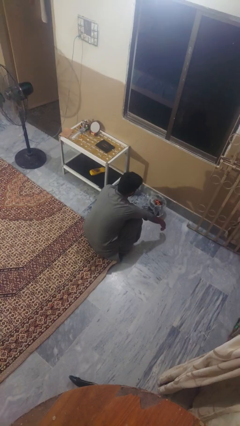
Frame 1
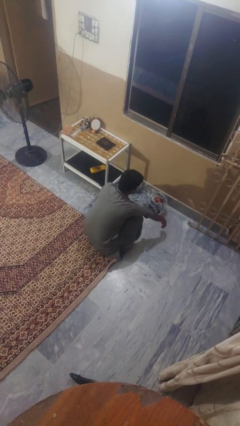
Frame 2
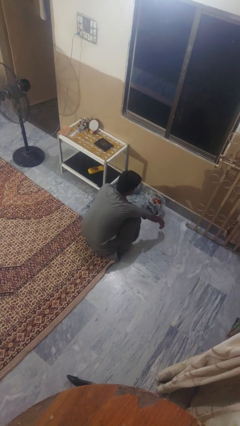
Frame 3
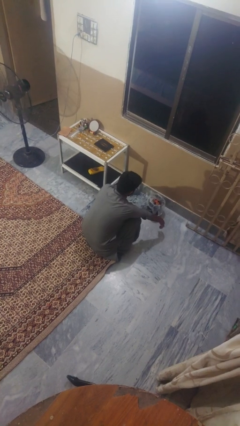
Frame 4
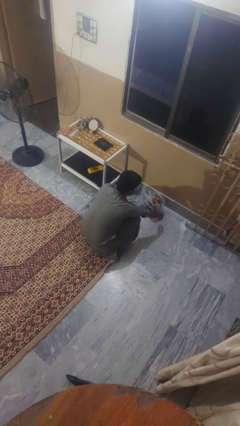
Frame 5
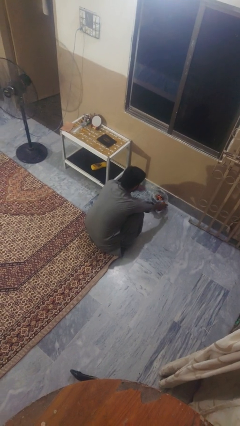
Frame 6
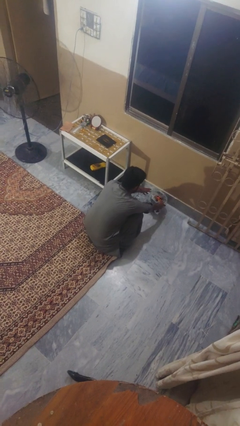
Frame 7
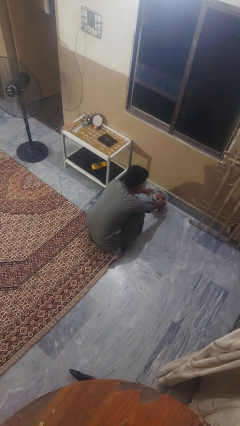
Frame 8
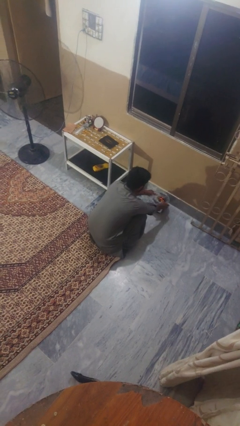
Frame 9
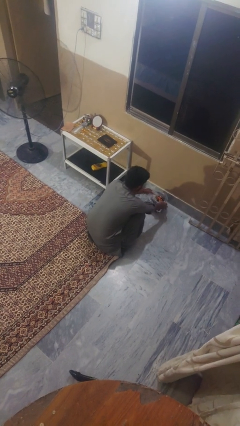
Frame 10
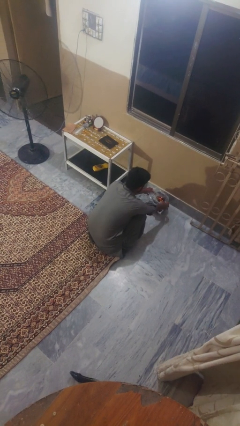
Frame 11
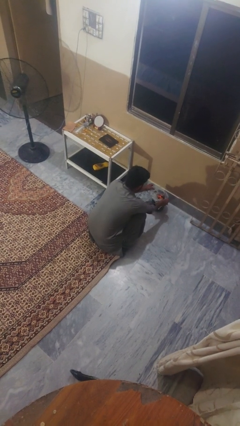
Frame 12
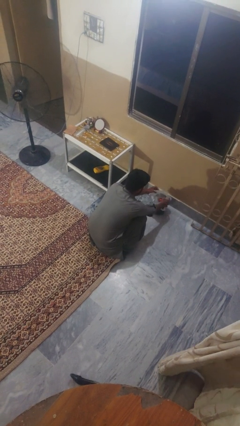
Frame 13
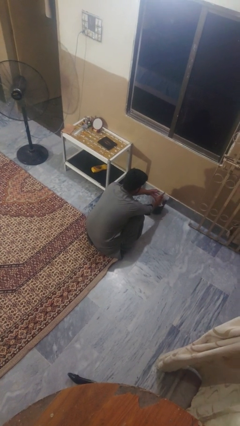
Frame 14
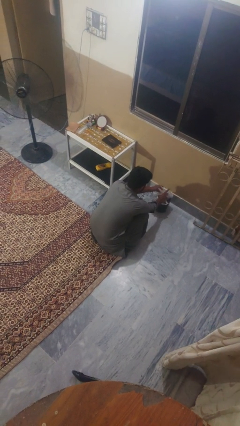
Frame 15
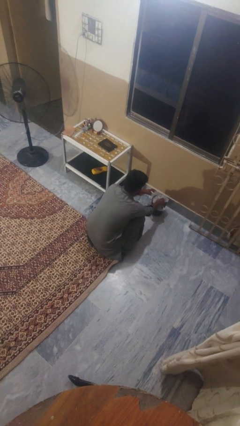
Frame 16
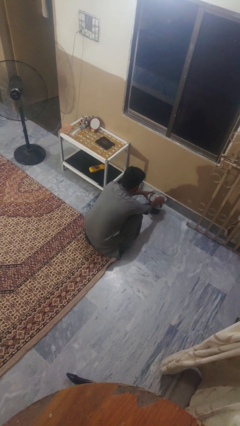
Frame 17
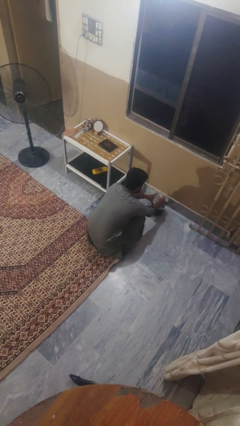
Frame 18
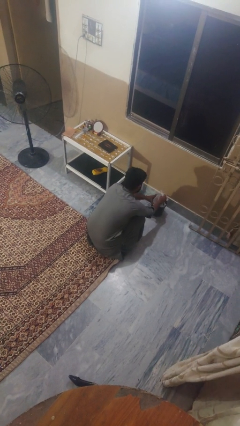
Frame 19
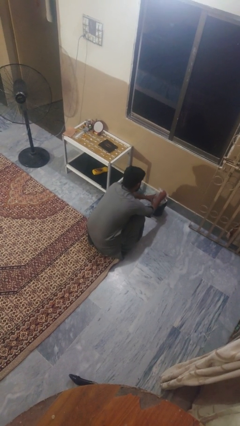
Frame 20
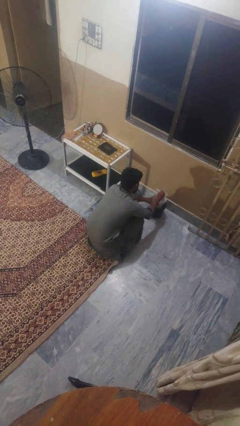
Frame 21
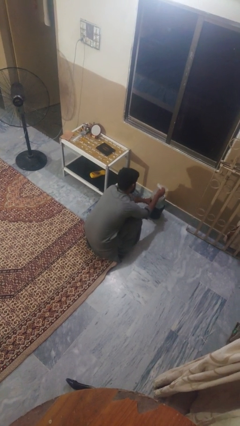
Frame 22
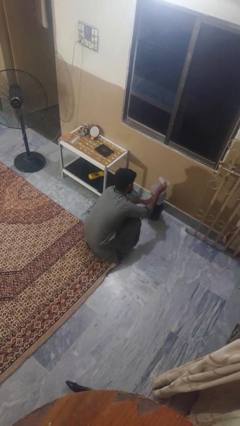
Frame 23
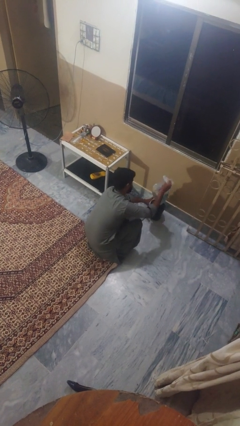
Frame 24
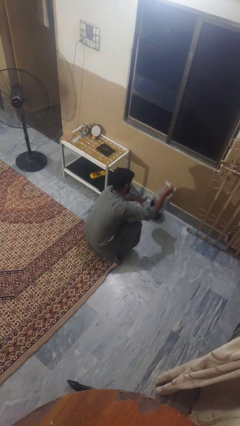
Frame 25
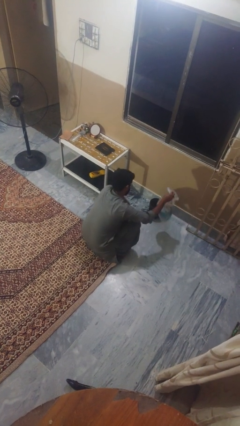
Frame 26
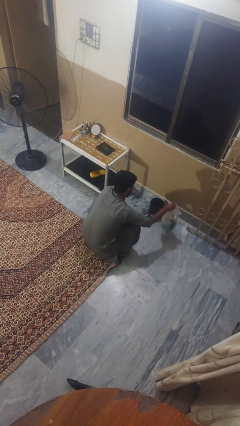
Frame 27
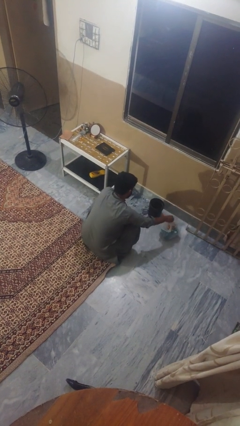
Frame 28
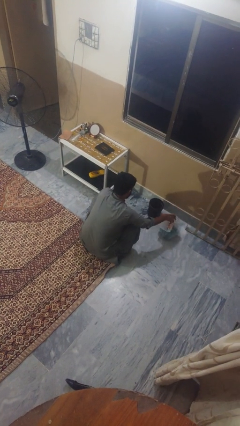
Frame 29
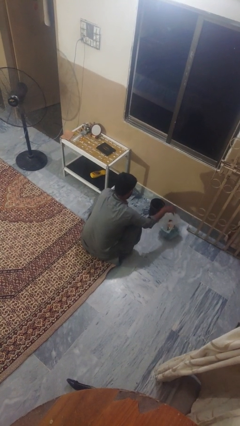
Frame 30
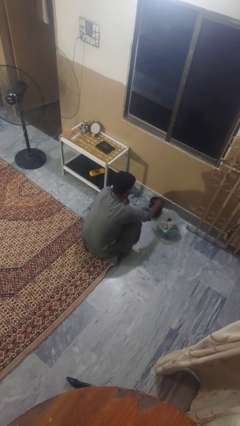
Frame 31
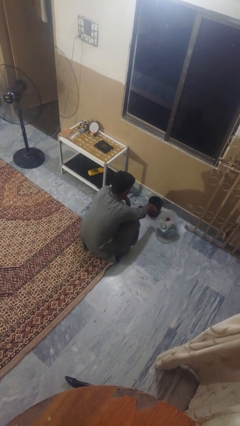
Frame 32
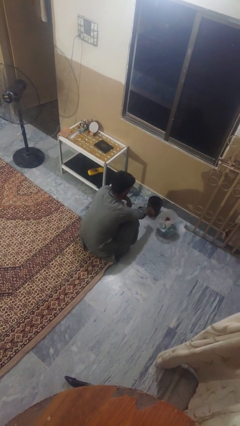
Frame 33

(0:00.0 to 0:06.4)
person removes trashbag from trashcan

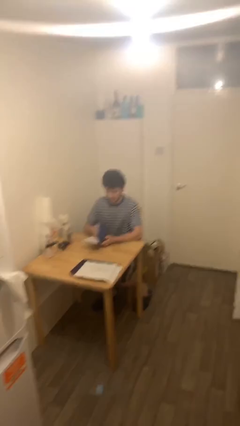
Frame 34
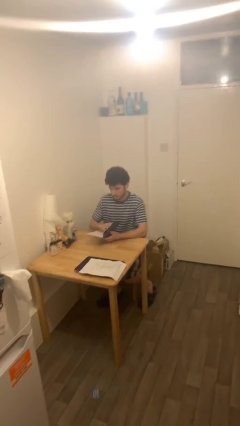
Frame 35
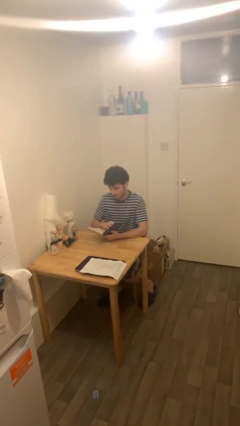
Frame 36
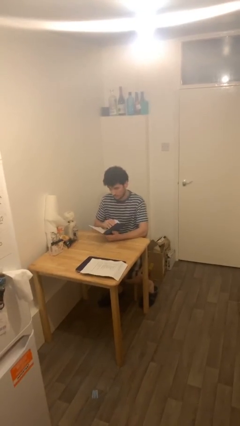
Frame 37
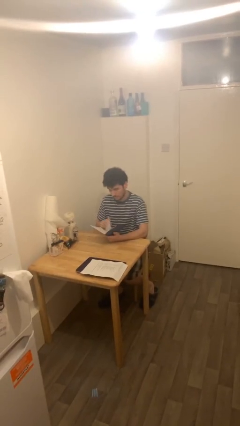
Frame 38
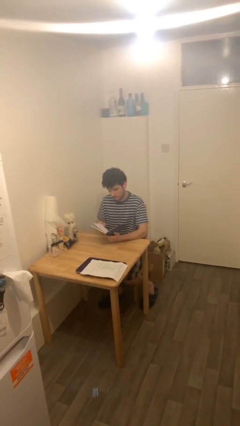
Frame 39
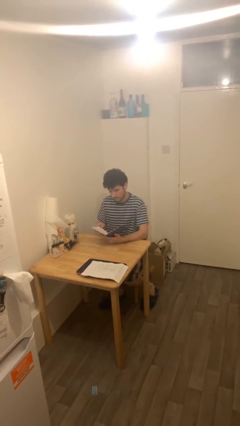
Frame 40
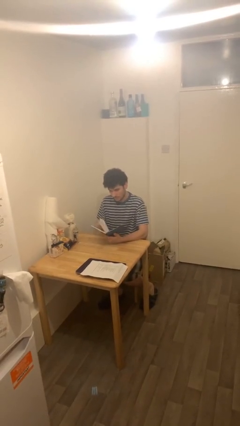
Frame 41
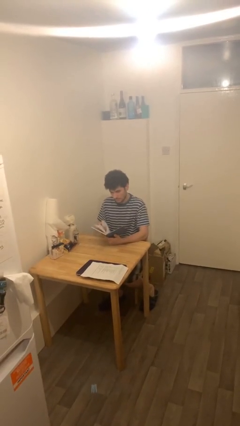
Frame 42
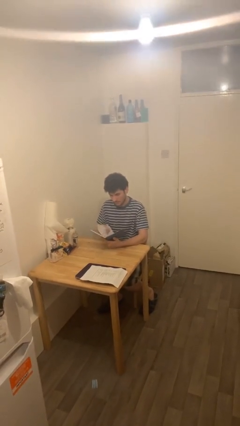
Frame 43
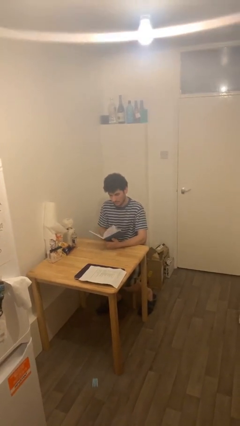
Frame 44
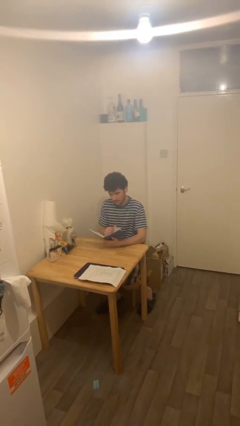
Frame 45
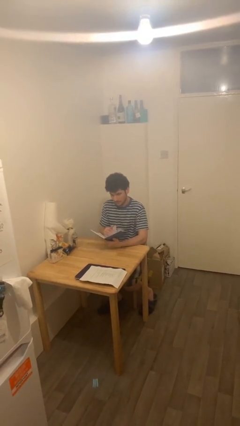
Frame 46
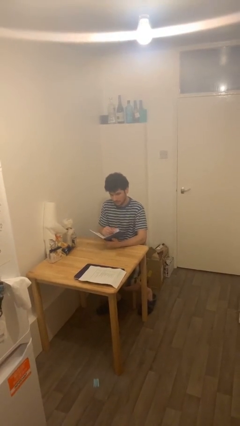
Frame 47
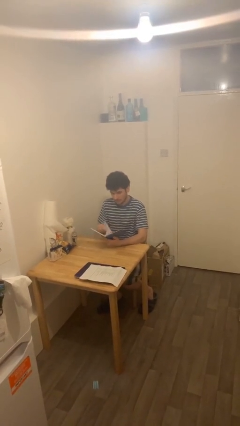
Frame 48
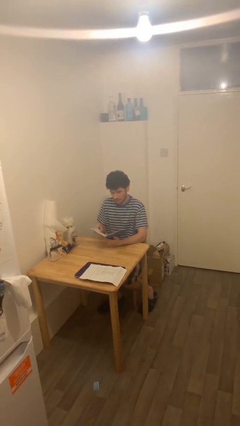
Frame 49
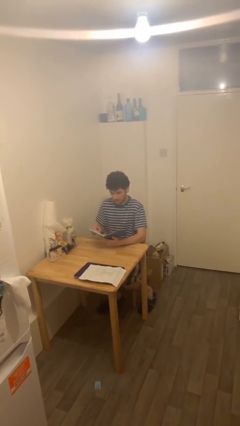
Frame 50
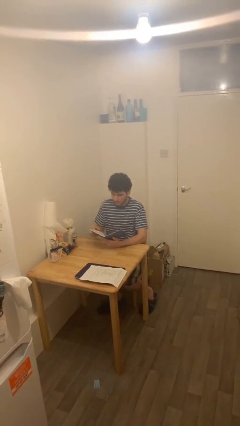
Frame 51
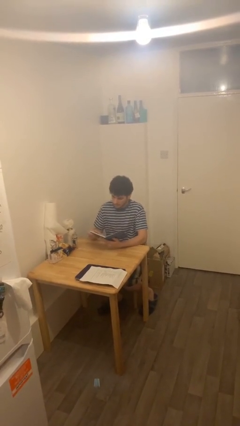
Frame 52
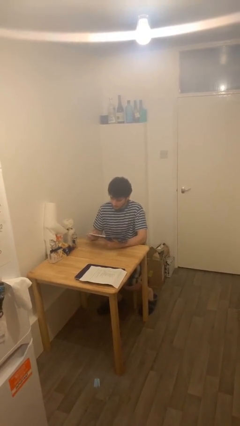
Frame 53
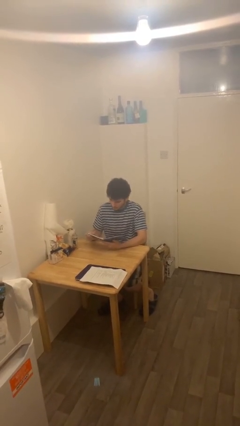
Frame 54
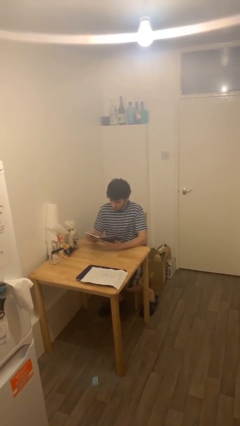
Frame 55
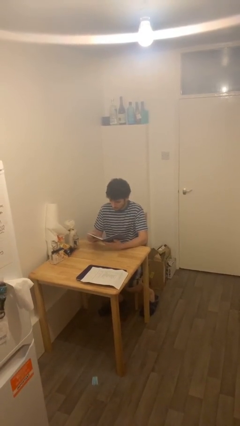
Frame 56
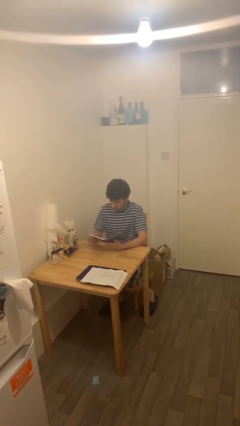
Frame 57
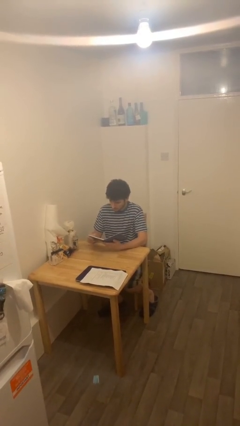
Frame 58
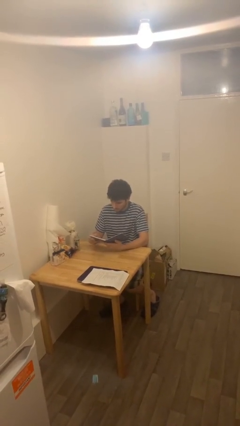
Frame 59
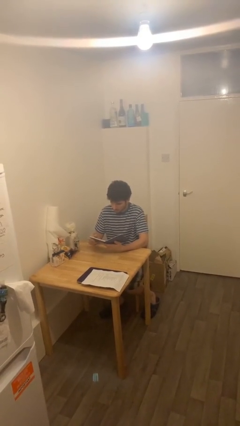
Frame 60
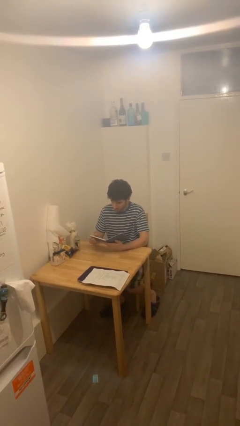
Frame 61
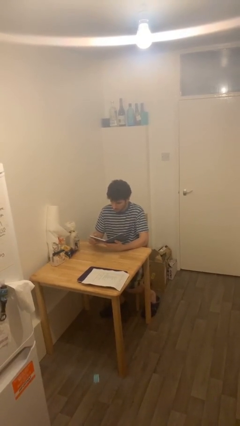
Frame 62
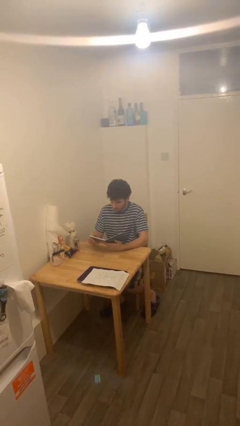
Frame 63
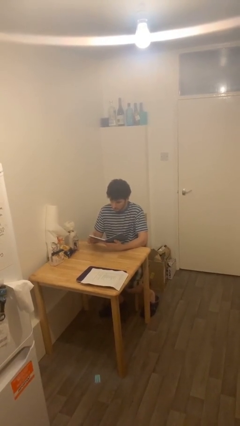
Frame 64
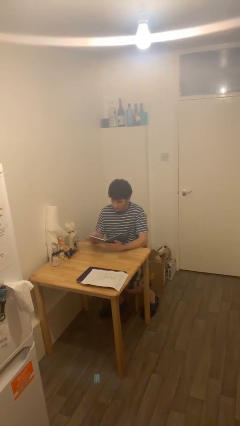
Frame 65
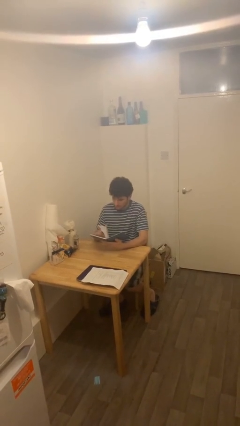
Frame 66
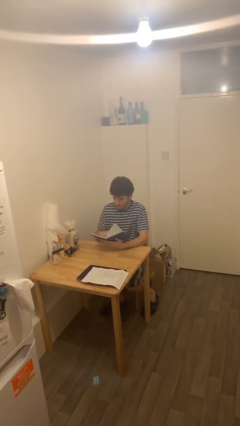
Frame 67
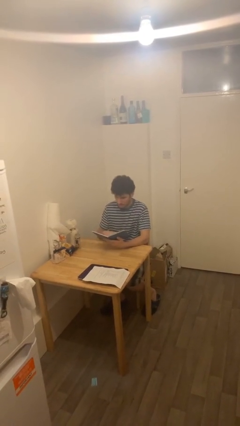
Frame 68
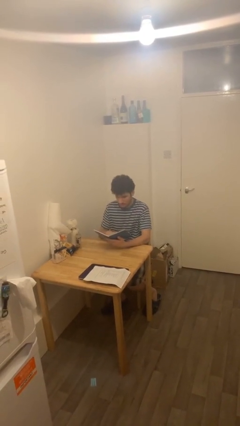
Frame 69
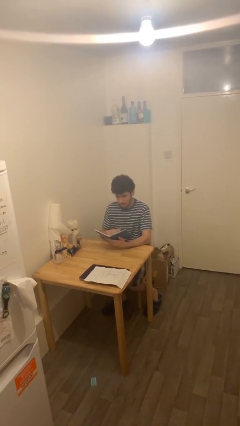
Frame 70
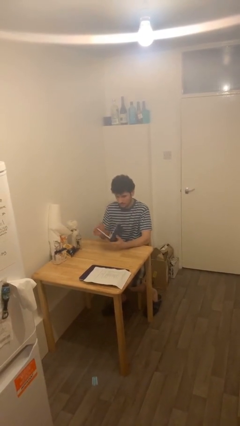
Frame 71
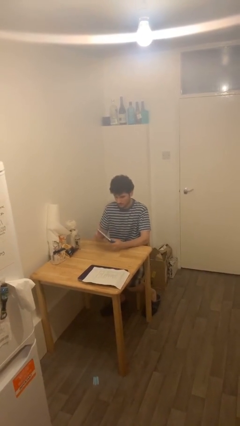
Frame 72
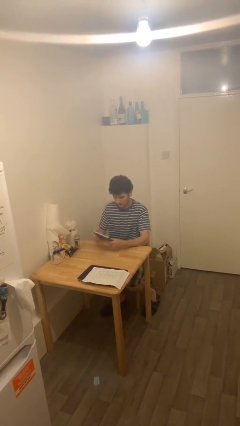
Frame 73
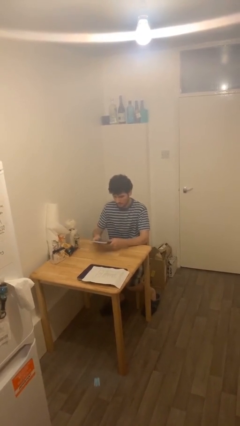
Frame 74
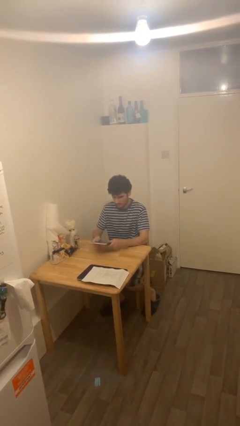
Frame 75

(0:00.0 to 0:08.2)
person reads document

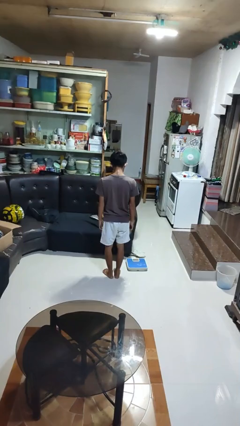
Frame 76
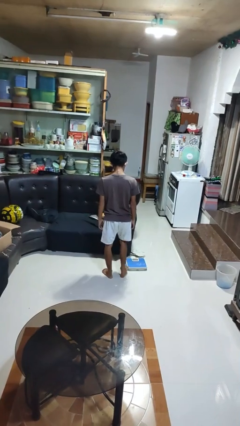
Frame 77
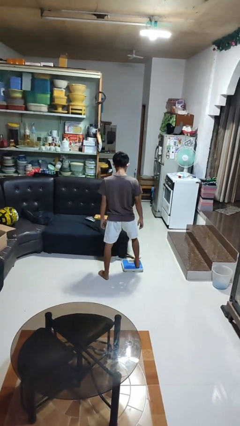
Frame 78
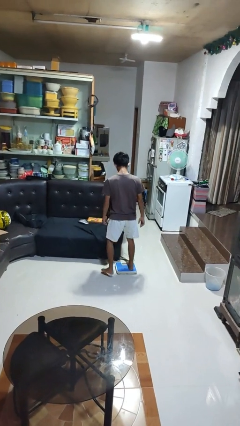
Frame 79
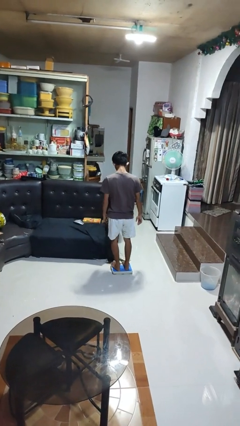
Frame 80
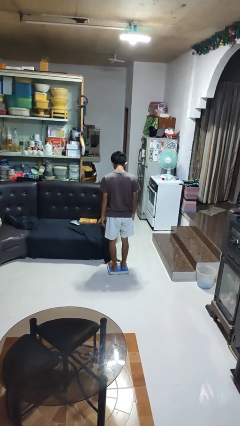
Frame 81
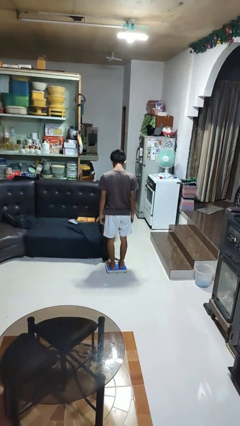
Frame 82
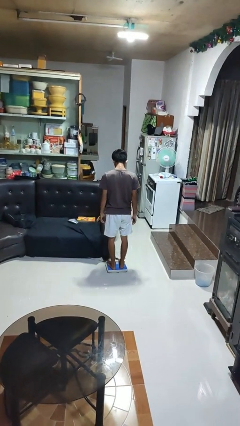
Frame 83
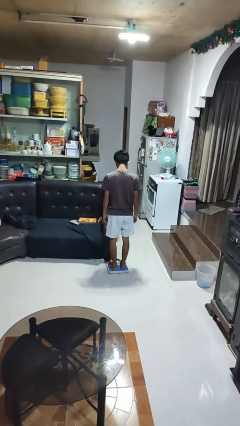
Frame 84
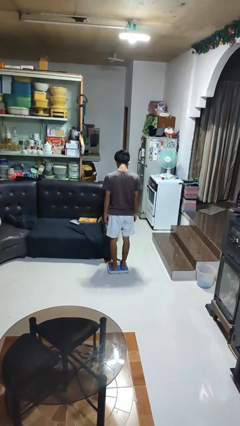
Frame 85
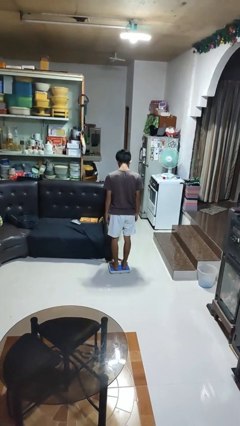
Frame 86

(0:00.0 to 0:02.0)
person uses bodyweight scale

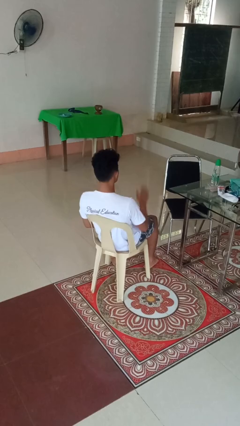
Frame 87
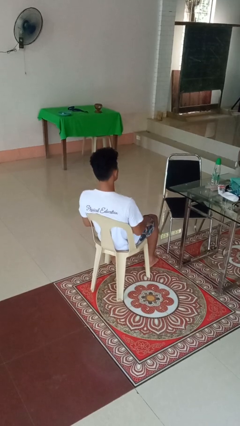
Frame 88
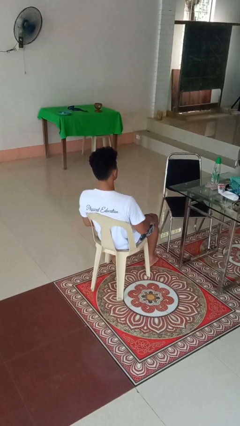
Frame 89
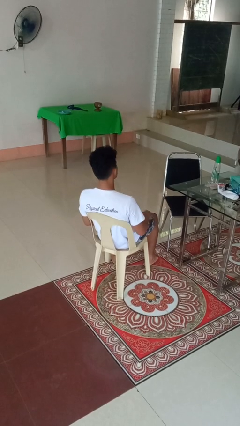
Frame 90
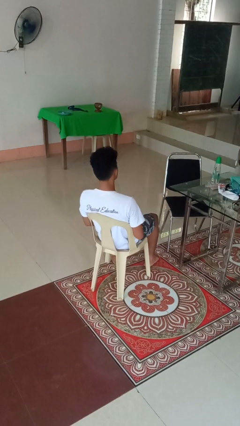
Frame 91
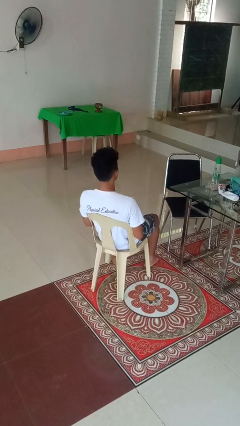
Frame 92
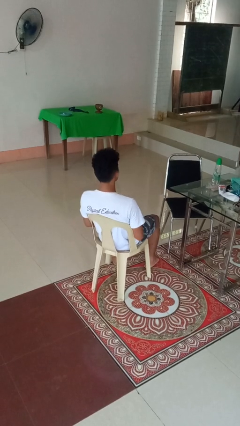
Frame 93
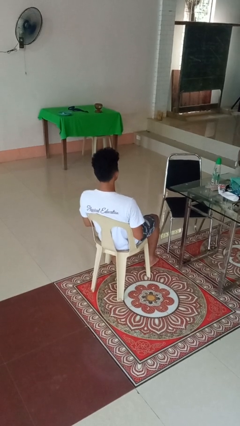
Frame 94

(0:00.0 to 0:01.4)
person slaps hands on thighs
